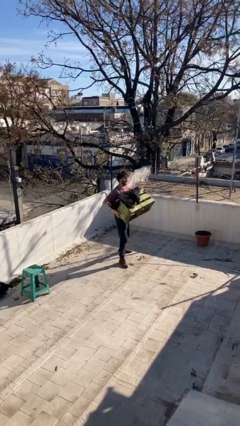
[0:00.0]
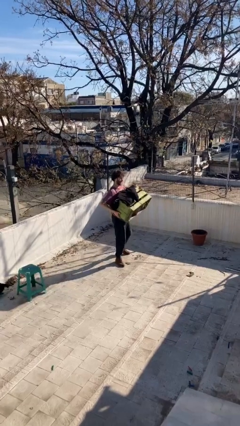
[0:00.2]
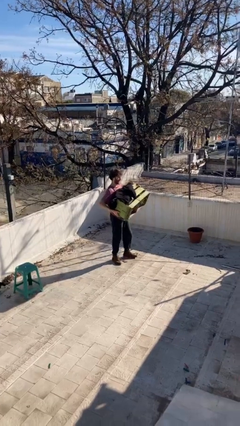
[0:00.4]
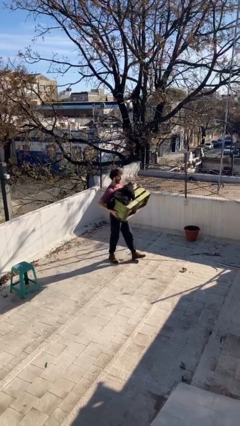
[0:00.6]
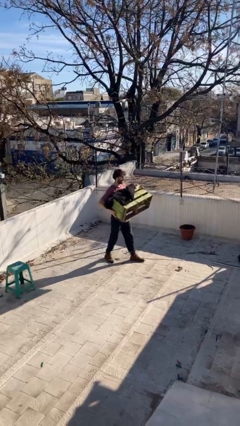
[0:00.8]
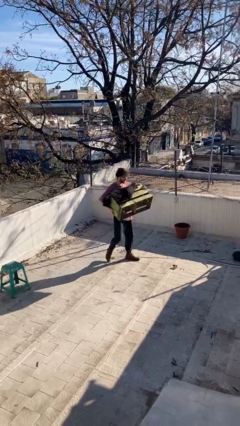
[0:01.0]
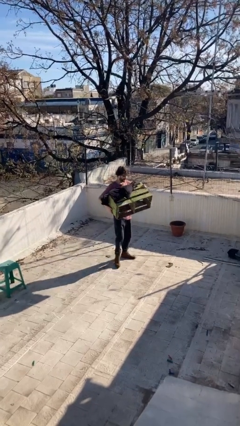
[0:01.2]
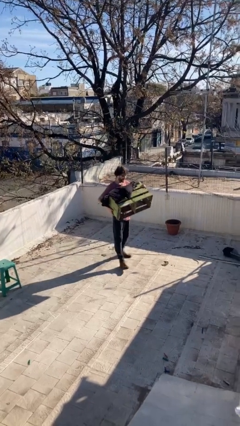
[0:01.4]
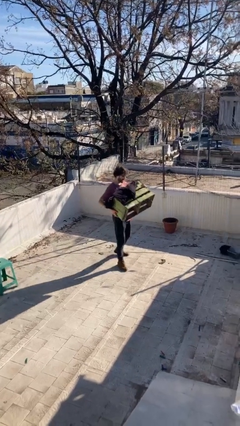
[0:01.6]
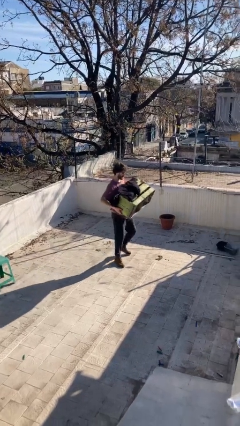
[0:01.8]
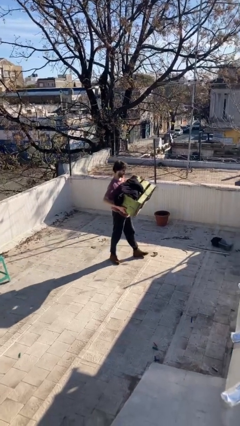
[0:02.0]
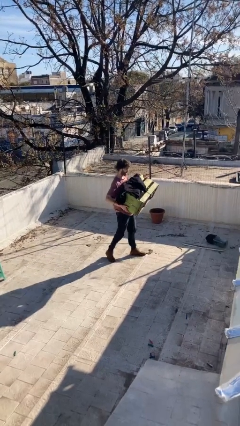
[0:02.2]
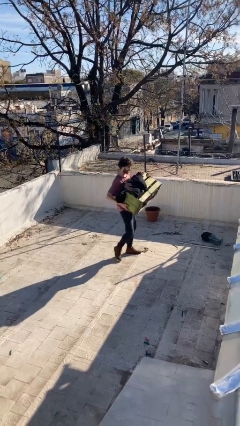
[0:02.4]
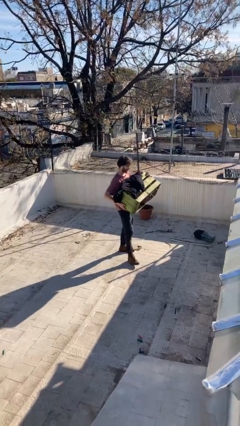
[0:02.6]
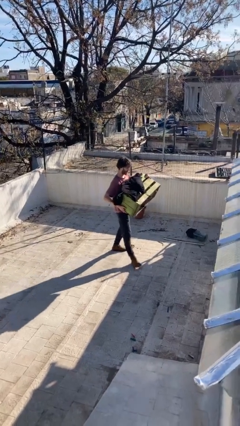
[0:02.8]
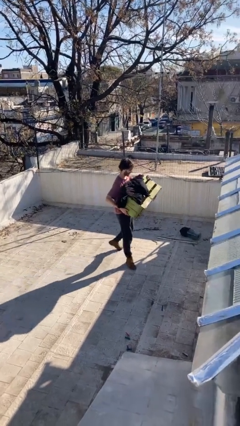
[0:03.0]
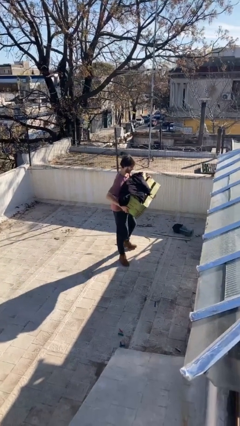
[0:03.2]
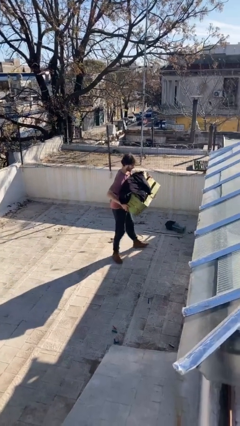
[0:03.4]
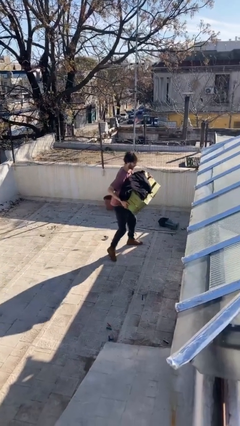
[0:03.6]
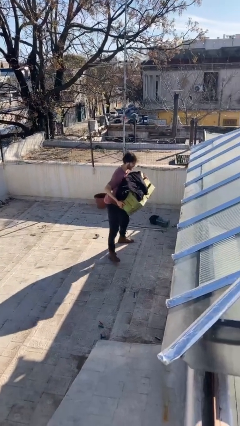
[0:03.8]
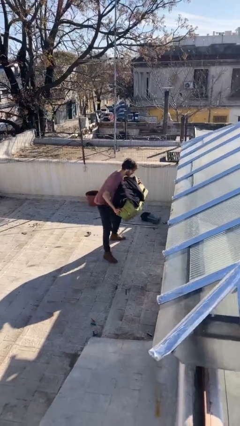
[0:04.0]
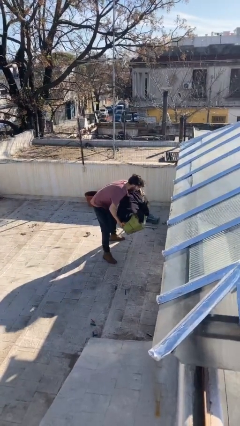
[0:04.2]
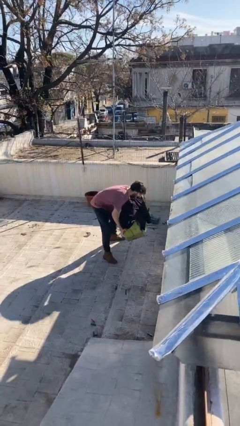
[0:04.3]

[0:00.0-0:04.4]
person carries heavy object

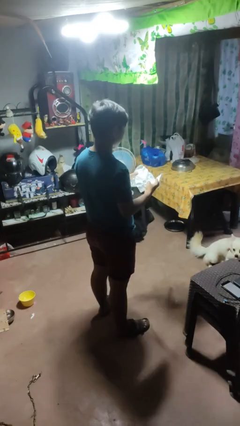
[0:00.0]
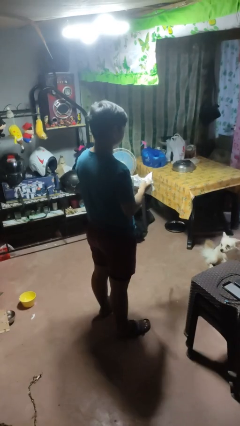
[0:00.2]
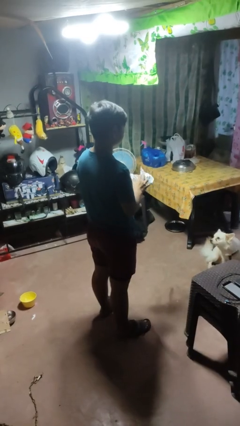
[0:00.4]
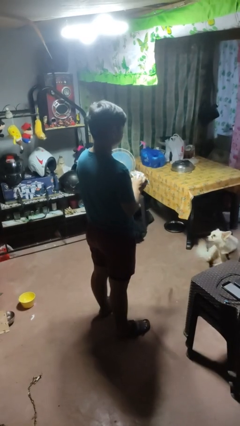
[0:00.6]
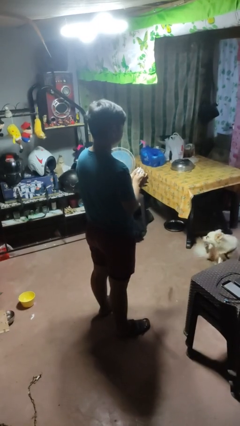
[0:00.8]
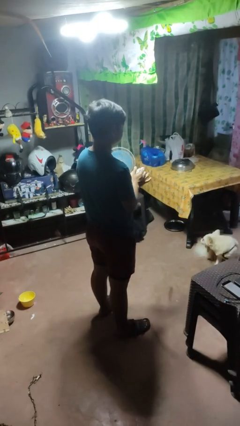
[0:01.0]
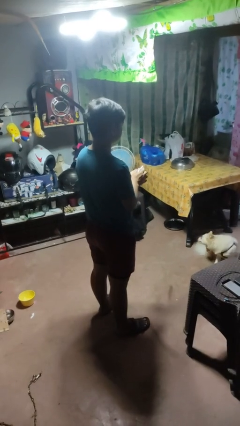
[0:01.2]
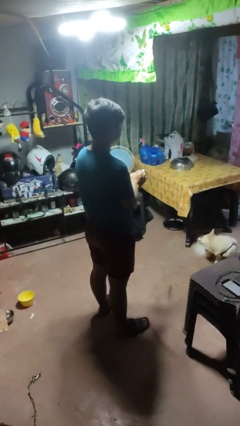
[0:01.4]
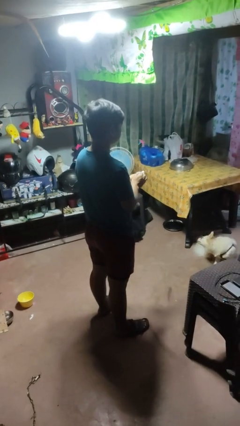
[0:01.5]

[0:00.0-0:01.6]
person crumples paper

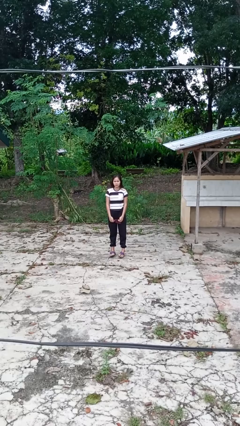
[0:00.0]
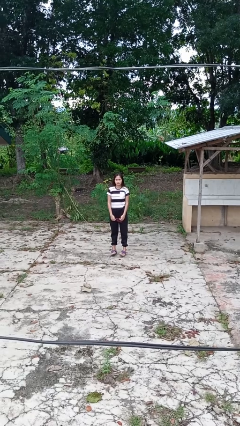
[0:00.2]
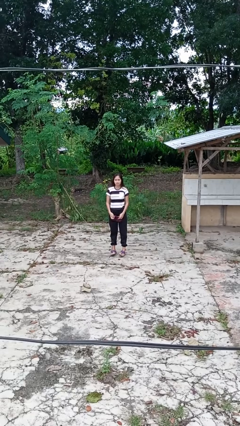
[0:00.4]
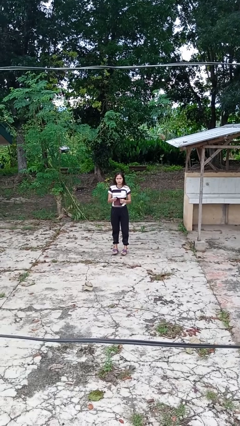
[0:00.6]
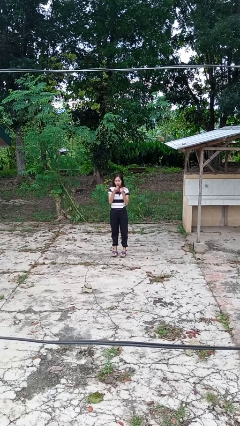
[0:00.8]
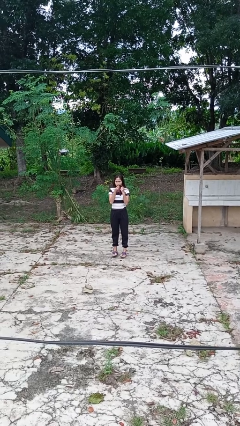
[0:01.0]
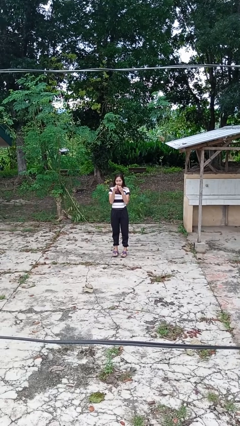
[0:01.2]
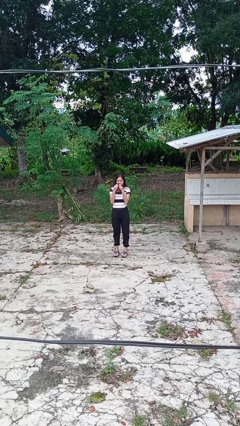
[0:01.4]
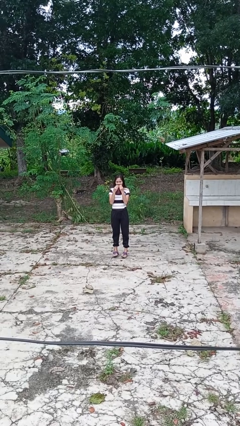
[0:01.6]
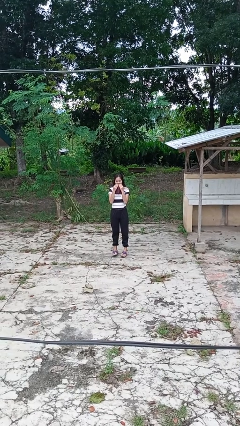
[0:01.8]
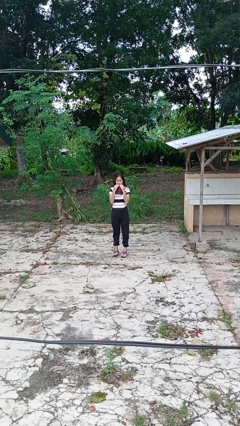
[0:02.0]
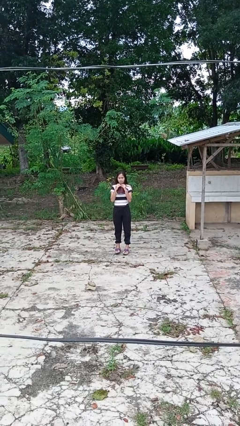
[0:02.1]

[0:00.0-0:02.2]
person wipes mouth with napkin

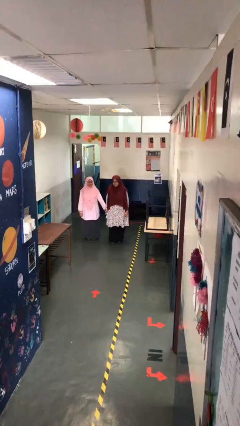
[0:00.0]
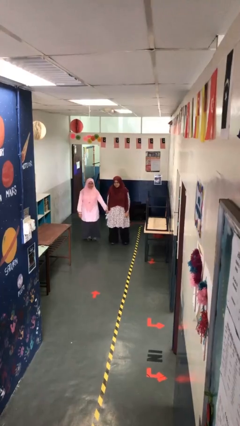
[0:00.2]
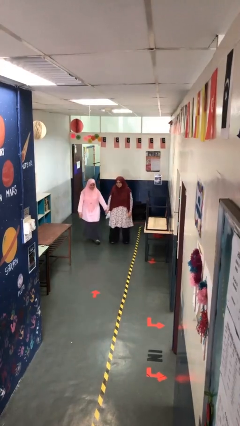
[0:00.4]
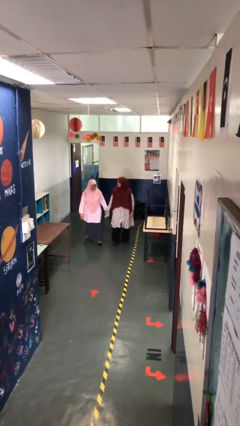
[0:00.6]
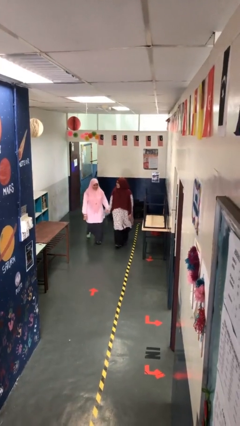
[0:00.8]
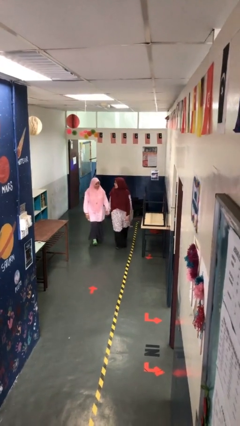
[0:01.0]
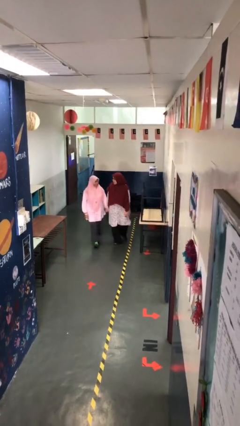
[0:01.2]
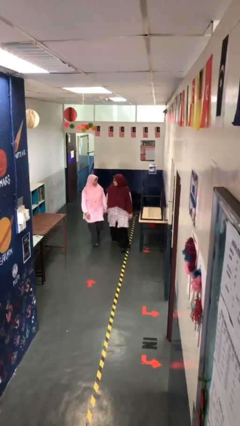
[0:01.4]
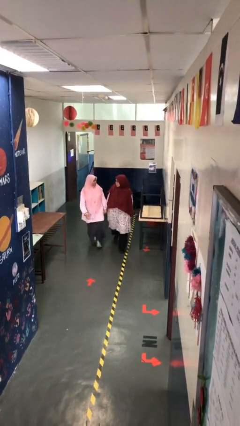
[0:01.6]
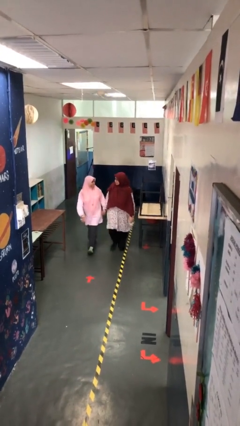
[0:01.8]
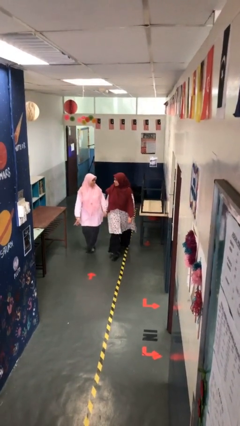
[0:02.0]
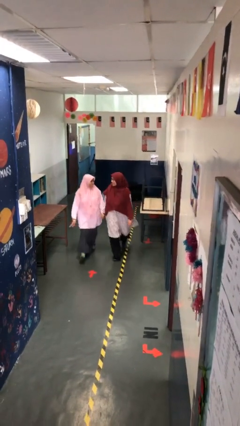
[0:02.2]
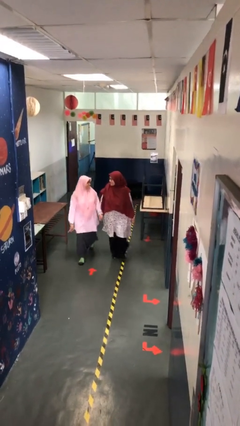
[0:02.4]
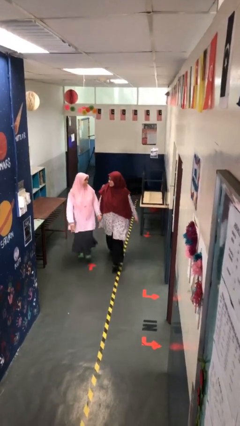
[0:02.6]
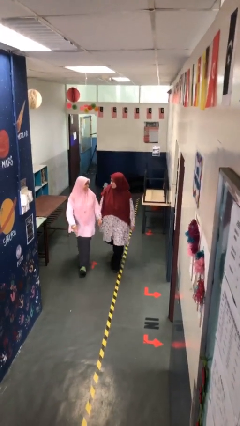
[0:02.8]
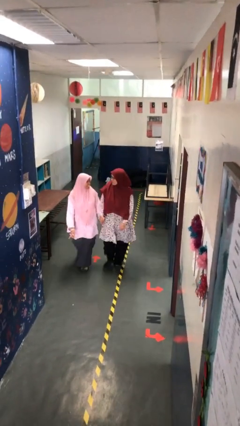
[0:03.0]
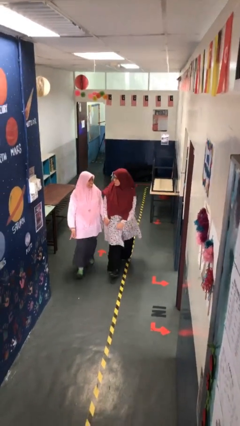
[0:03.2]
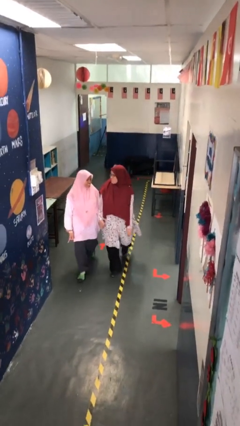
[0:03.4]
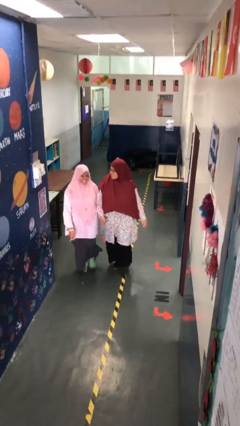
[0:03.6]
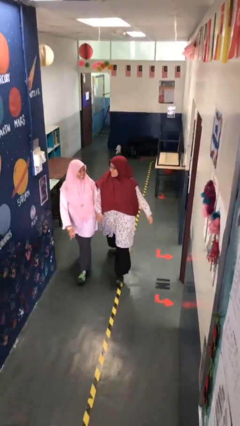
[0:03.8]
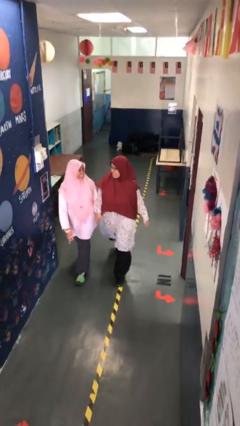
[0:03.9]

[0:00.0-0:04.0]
person holds hand

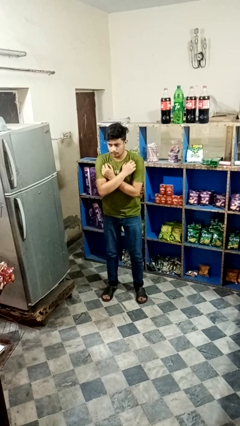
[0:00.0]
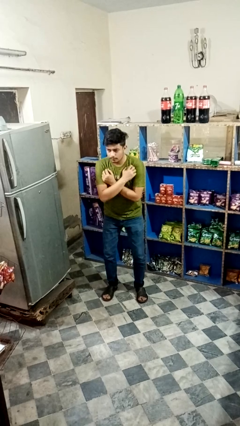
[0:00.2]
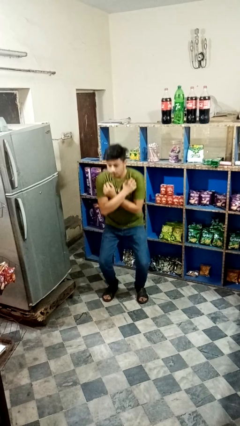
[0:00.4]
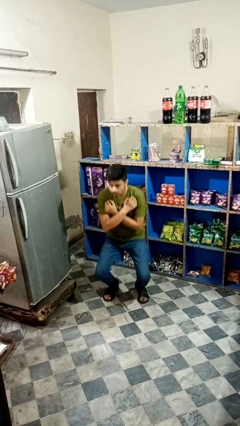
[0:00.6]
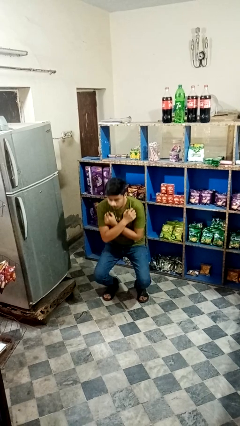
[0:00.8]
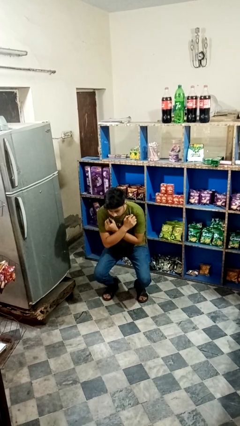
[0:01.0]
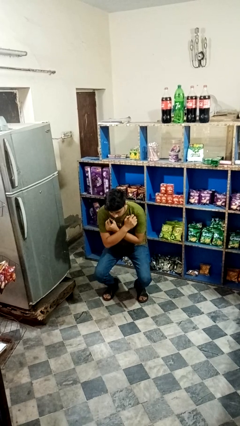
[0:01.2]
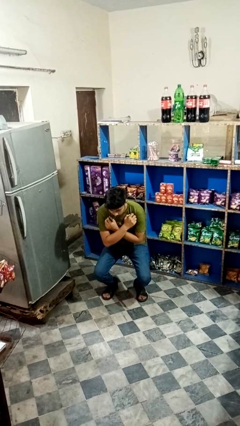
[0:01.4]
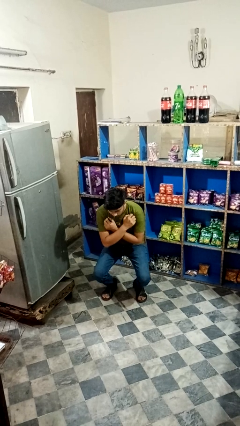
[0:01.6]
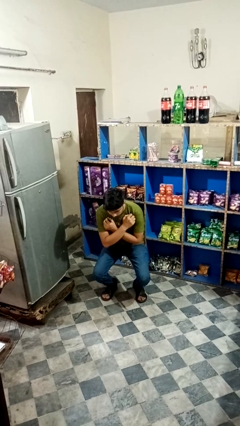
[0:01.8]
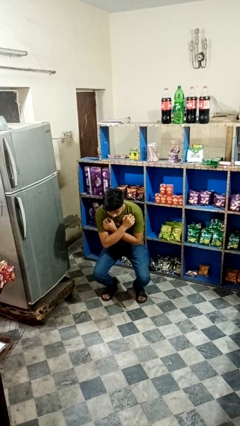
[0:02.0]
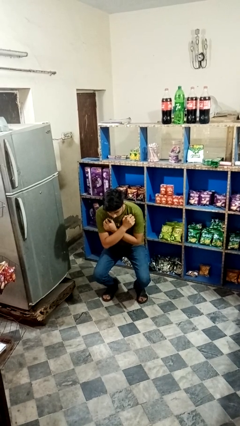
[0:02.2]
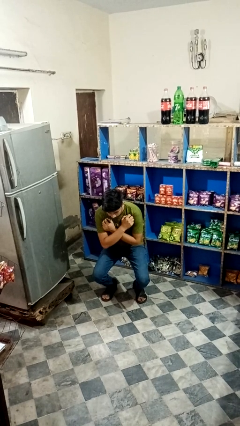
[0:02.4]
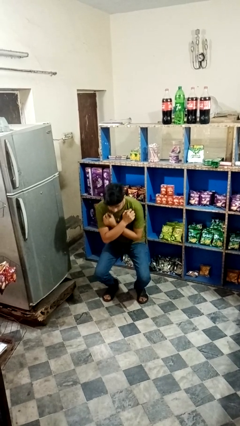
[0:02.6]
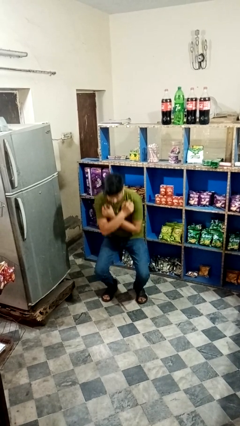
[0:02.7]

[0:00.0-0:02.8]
person squats

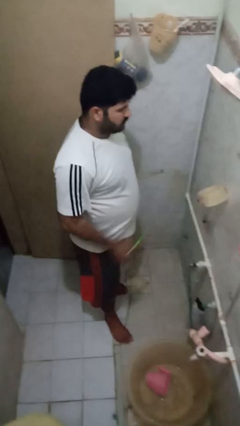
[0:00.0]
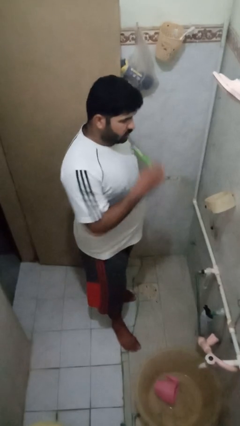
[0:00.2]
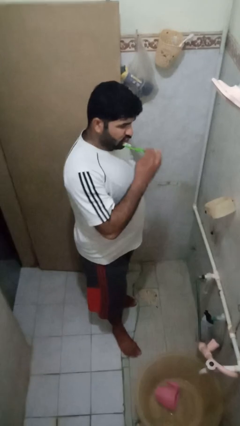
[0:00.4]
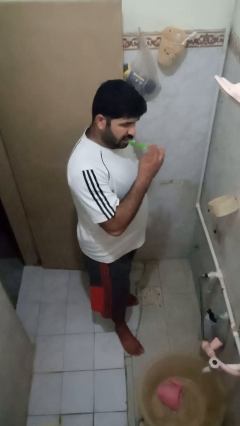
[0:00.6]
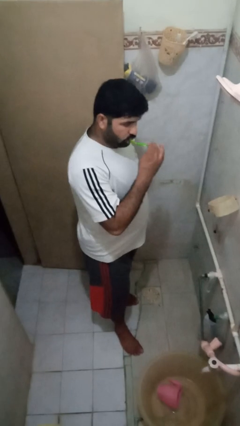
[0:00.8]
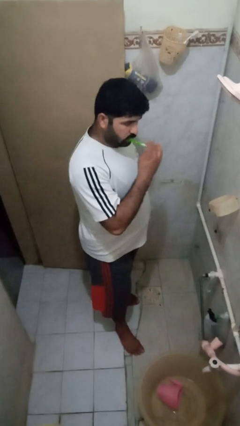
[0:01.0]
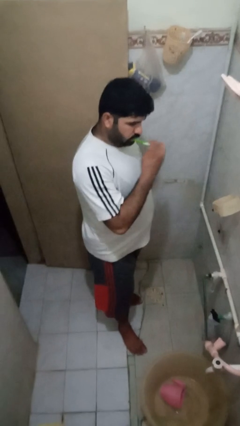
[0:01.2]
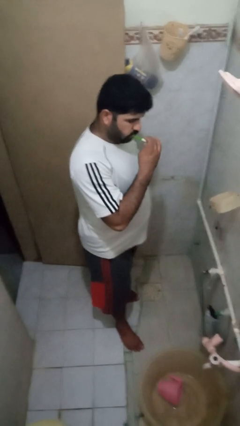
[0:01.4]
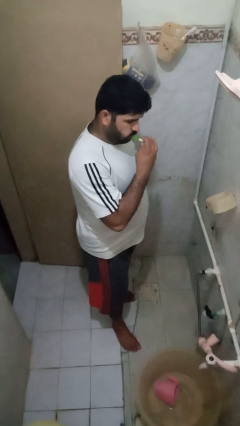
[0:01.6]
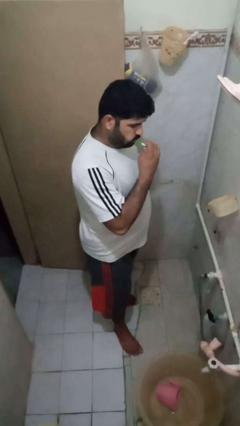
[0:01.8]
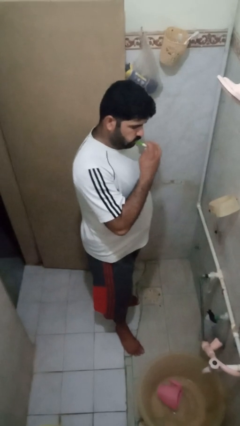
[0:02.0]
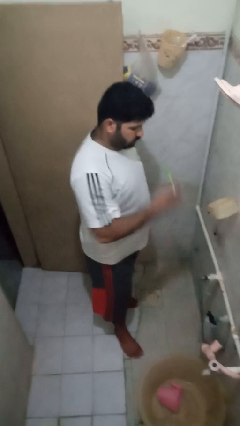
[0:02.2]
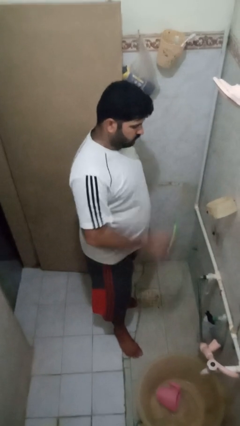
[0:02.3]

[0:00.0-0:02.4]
person brushes teeth
